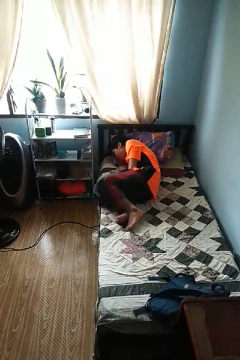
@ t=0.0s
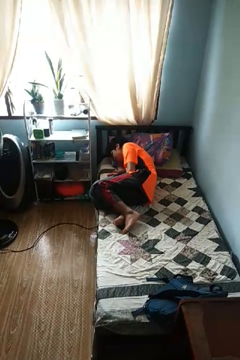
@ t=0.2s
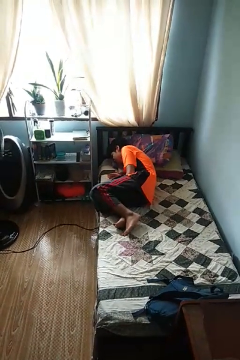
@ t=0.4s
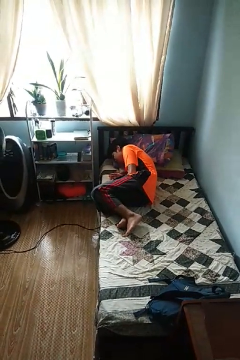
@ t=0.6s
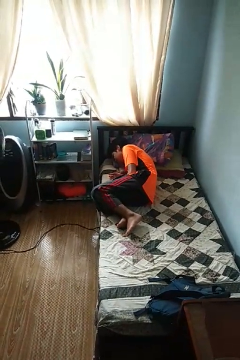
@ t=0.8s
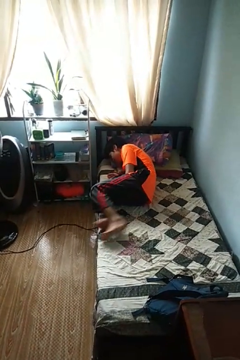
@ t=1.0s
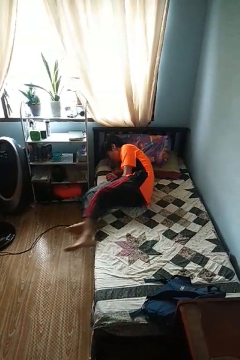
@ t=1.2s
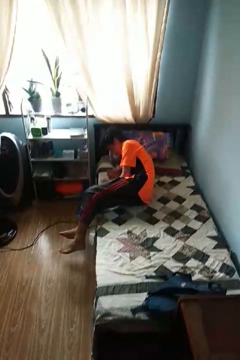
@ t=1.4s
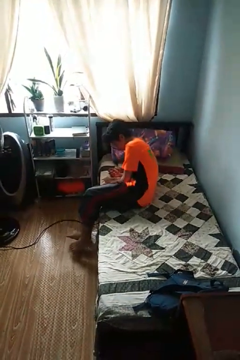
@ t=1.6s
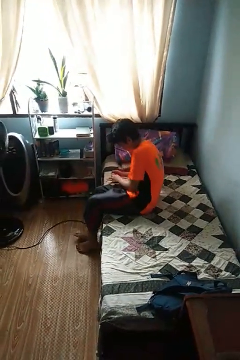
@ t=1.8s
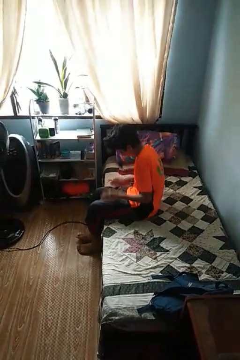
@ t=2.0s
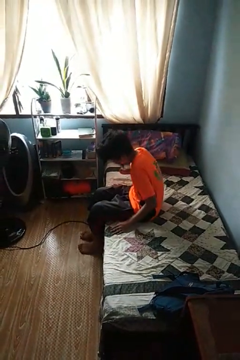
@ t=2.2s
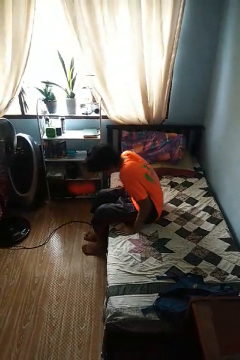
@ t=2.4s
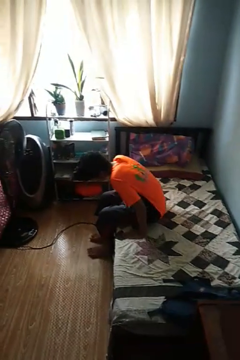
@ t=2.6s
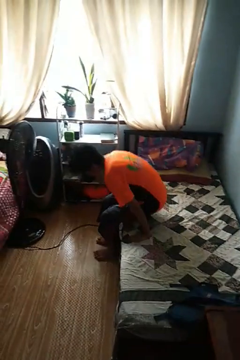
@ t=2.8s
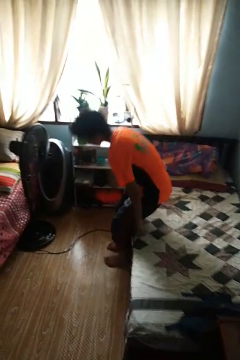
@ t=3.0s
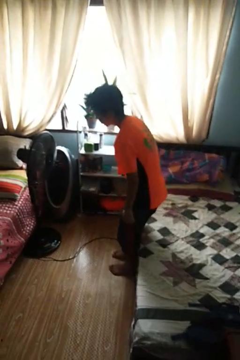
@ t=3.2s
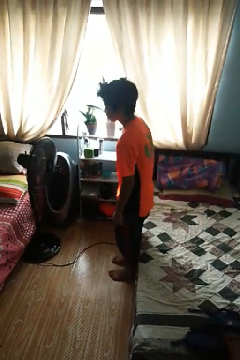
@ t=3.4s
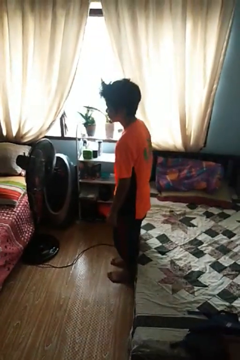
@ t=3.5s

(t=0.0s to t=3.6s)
person stands up

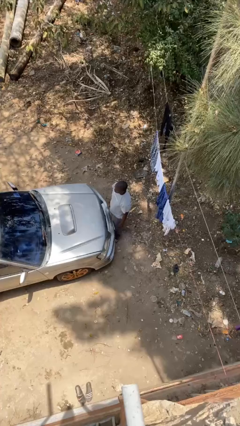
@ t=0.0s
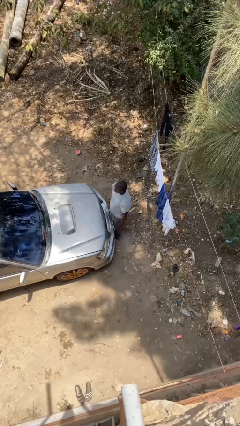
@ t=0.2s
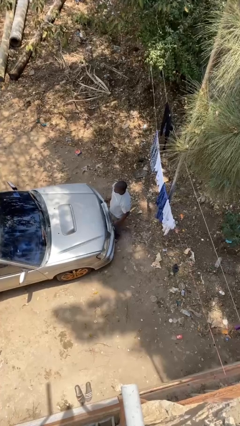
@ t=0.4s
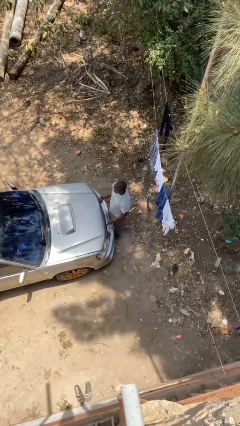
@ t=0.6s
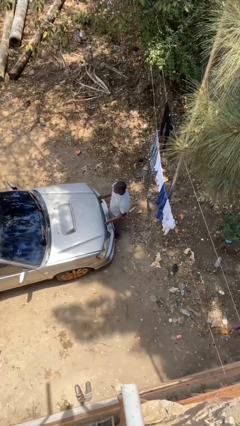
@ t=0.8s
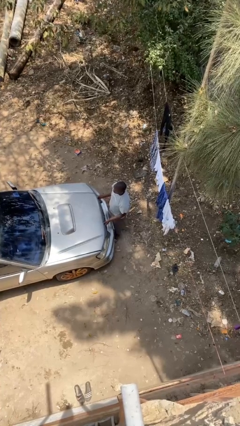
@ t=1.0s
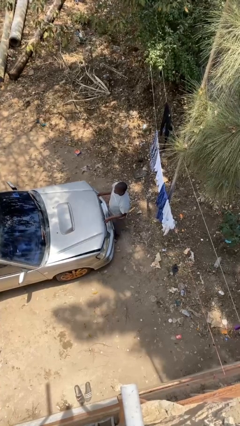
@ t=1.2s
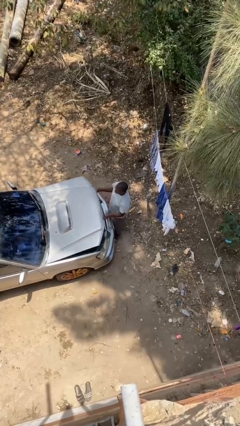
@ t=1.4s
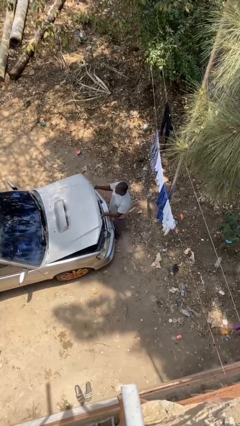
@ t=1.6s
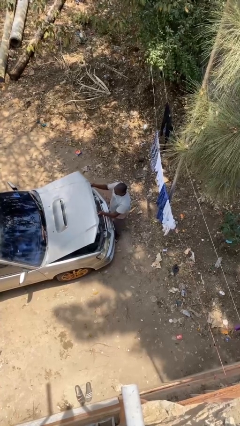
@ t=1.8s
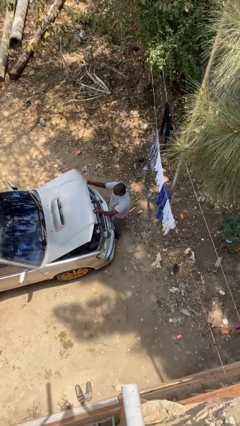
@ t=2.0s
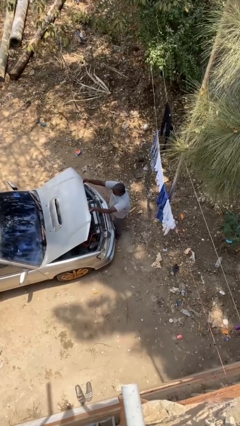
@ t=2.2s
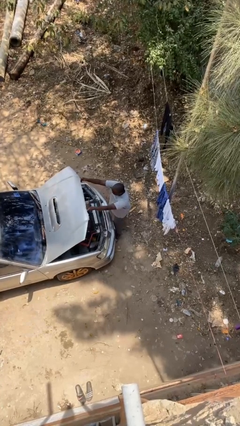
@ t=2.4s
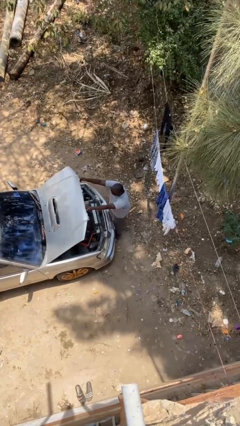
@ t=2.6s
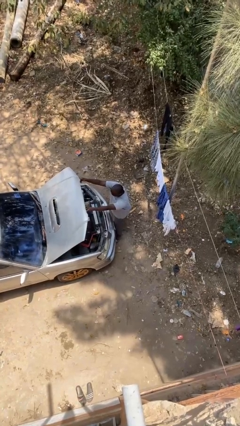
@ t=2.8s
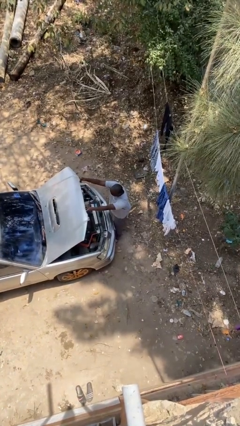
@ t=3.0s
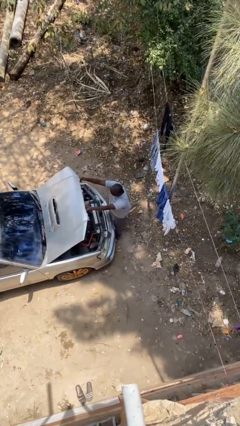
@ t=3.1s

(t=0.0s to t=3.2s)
person opens car hood

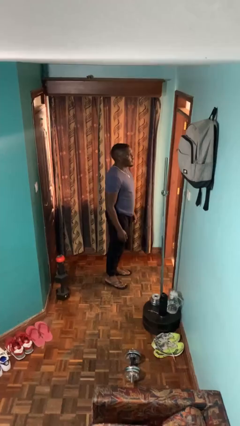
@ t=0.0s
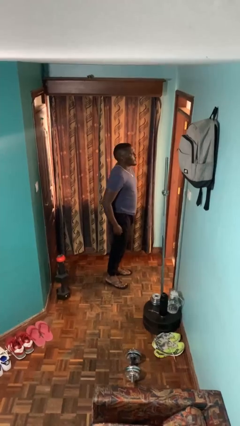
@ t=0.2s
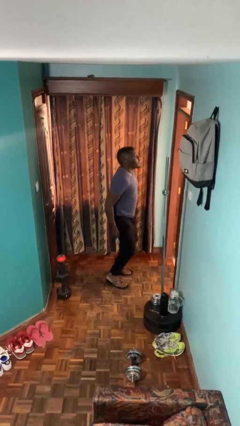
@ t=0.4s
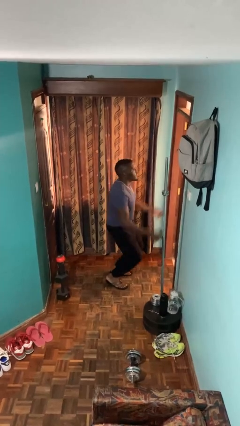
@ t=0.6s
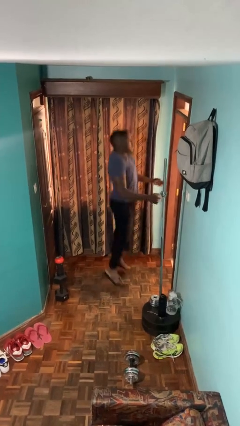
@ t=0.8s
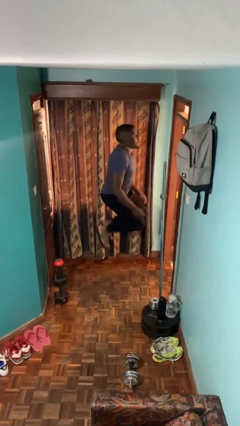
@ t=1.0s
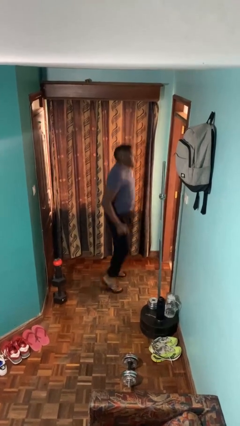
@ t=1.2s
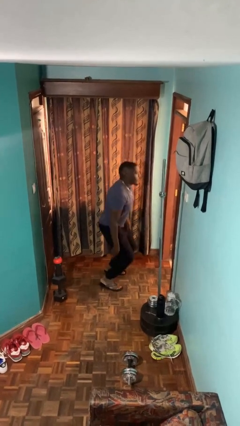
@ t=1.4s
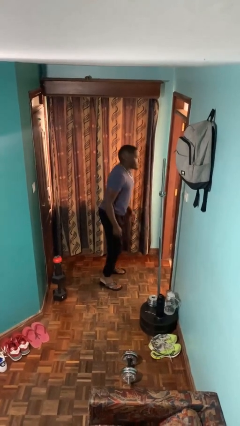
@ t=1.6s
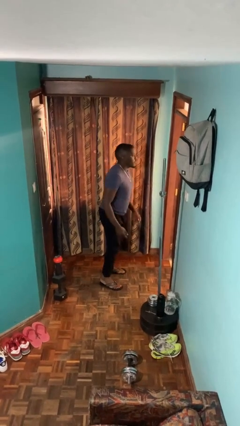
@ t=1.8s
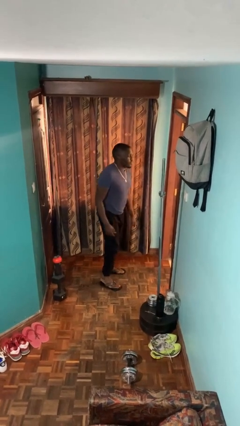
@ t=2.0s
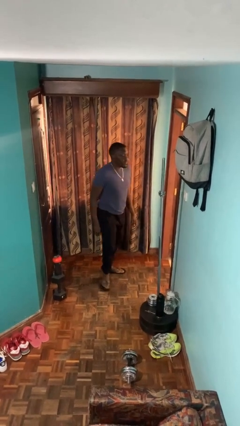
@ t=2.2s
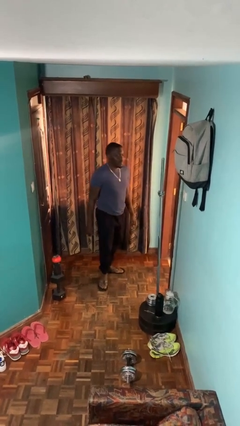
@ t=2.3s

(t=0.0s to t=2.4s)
person jumps

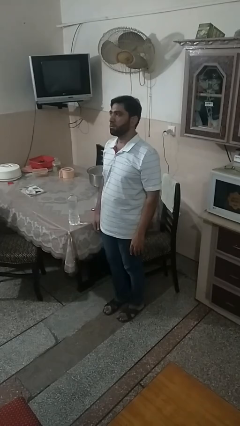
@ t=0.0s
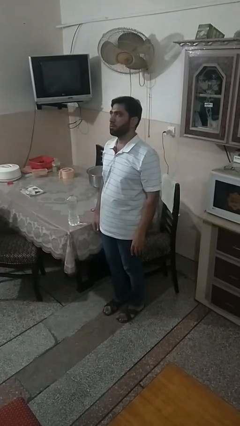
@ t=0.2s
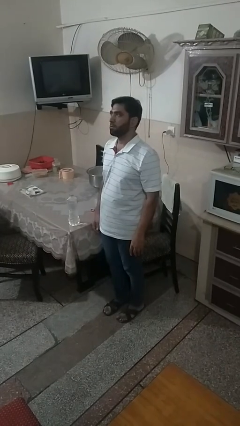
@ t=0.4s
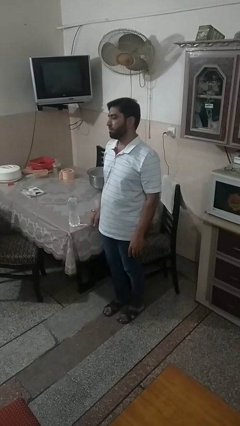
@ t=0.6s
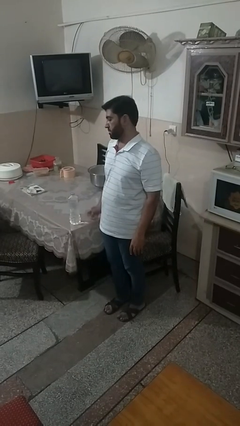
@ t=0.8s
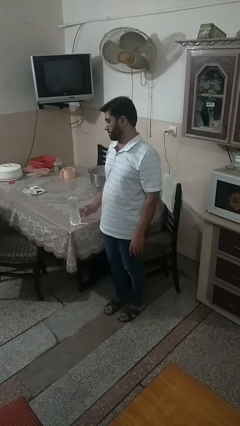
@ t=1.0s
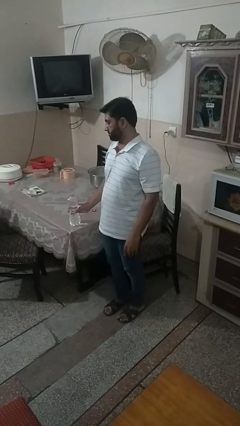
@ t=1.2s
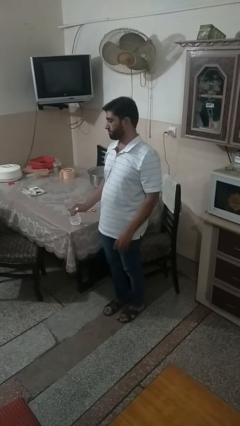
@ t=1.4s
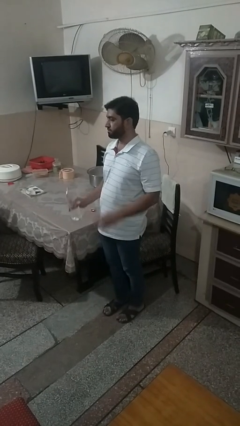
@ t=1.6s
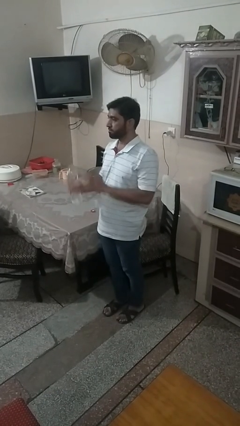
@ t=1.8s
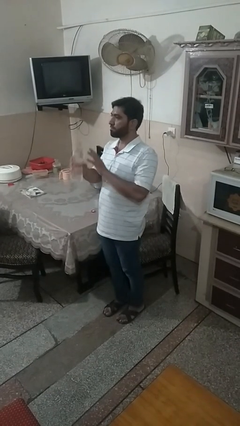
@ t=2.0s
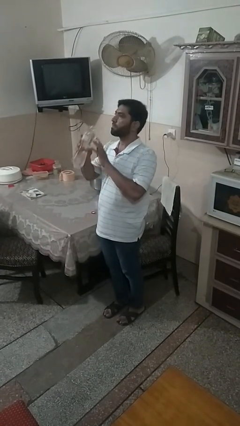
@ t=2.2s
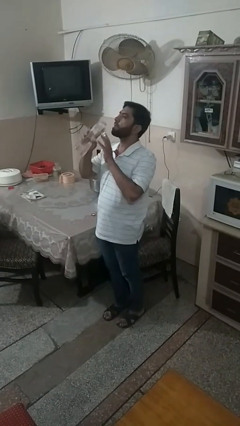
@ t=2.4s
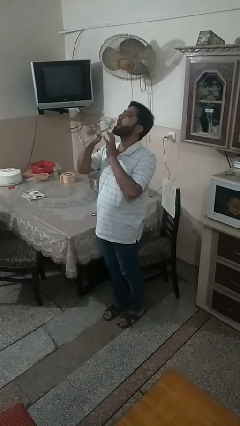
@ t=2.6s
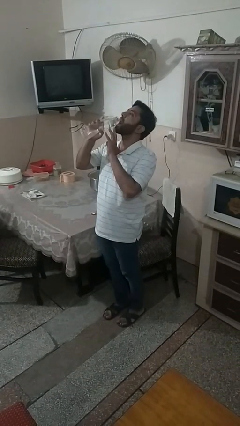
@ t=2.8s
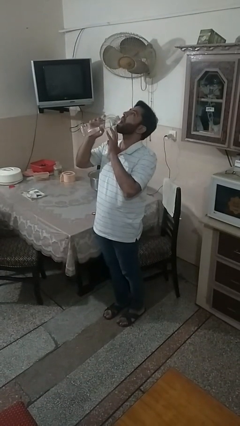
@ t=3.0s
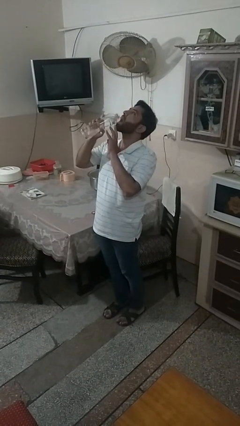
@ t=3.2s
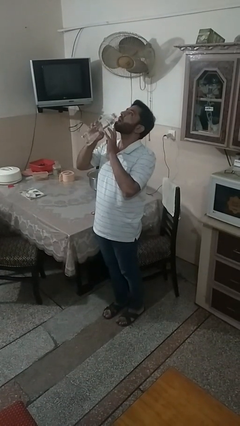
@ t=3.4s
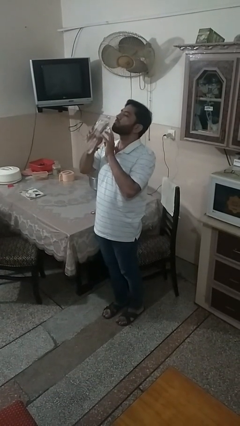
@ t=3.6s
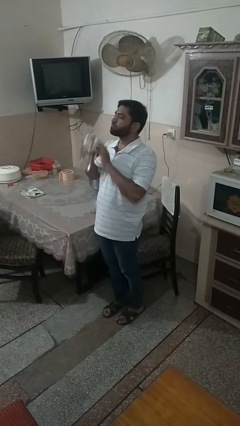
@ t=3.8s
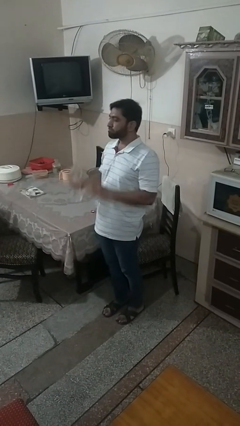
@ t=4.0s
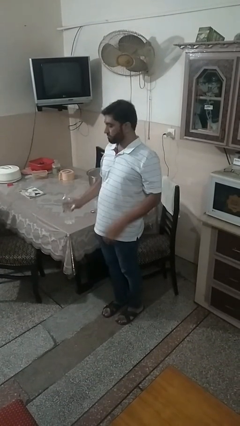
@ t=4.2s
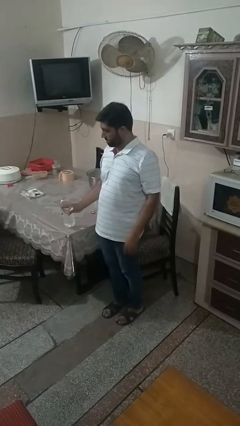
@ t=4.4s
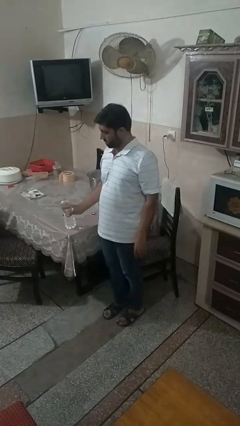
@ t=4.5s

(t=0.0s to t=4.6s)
person drinks from bottle

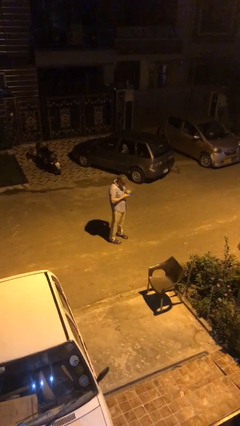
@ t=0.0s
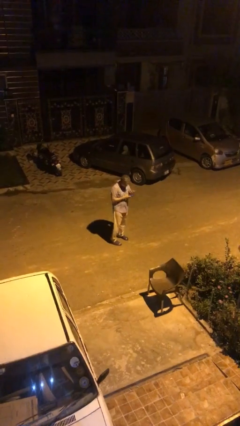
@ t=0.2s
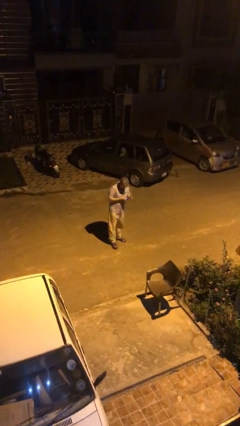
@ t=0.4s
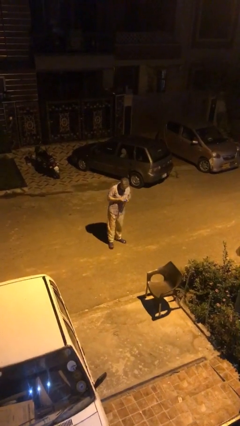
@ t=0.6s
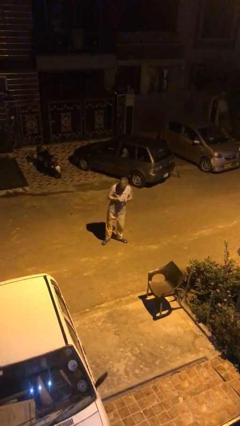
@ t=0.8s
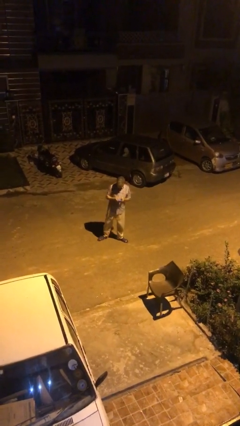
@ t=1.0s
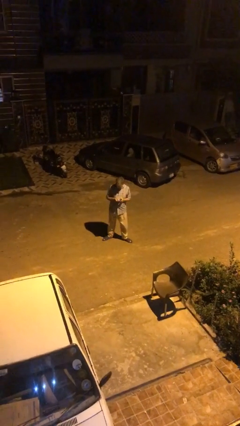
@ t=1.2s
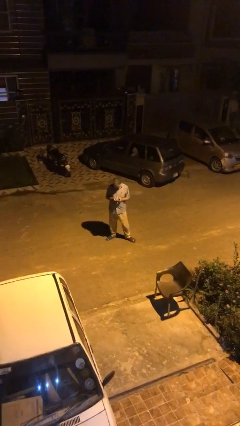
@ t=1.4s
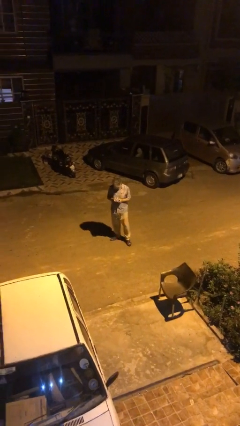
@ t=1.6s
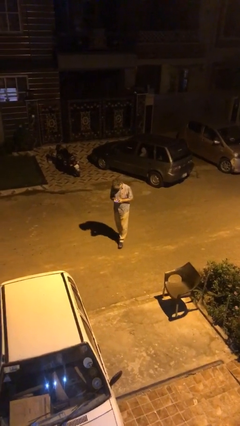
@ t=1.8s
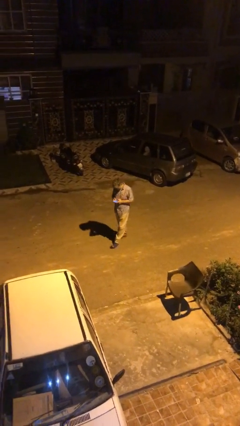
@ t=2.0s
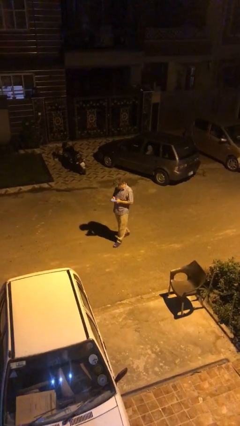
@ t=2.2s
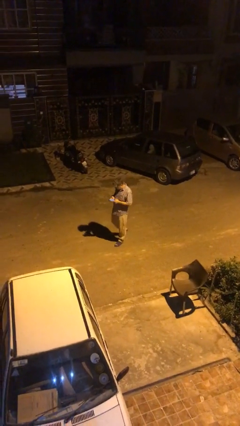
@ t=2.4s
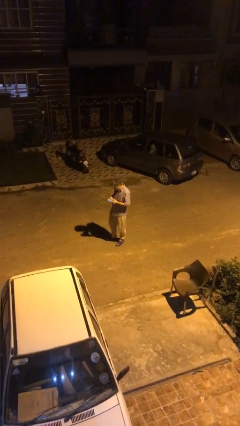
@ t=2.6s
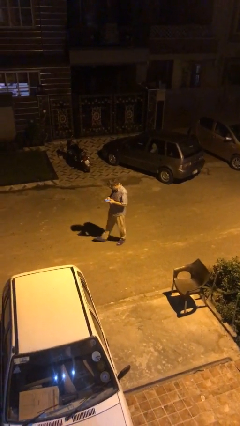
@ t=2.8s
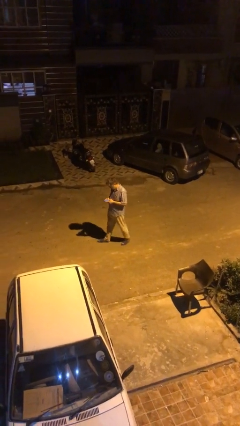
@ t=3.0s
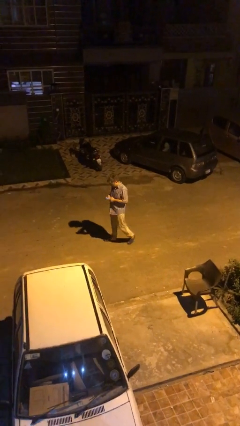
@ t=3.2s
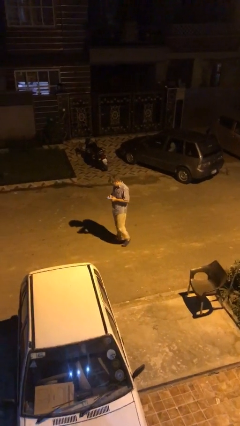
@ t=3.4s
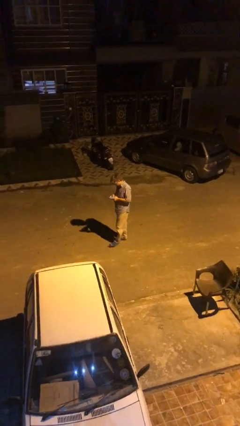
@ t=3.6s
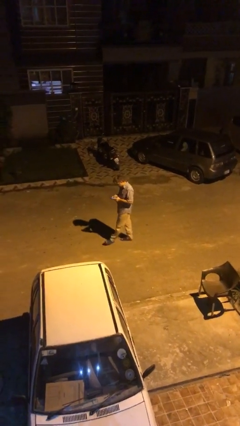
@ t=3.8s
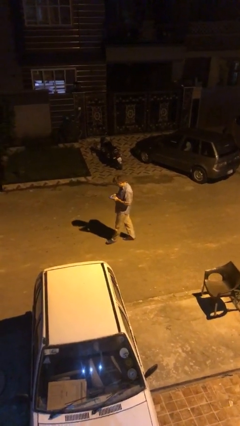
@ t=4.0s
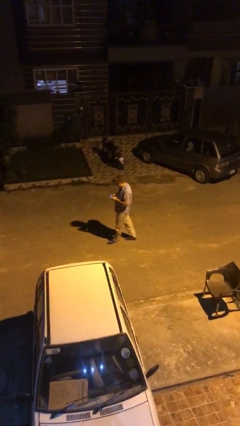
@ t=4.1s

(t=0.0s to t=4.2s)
person texts on phone
